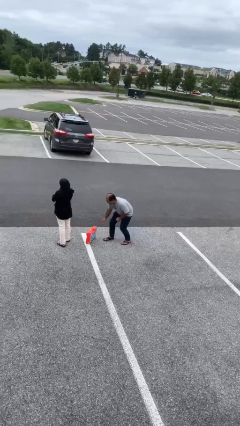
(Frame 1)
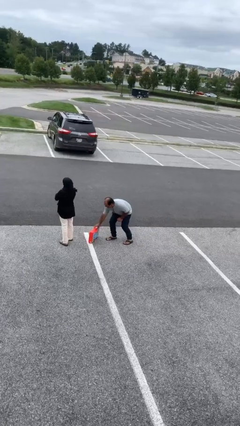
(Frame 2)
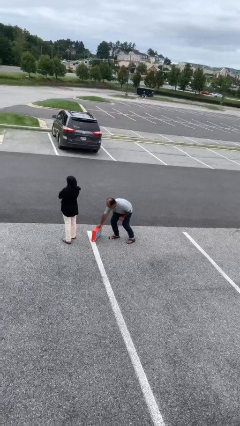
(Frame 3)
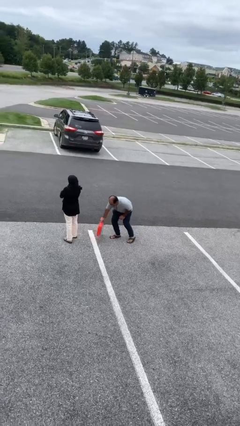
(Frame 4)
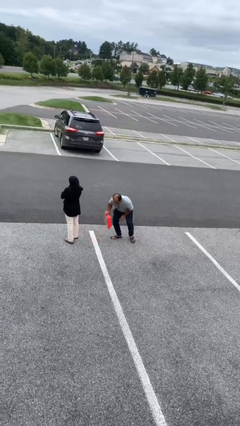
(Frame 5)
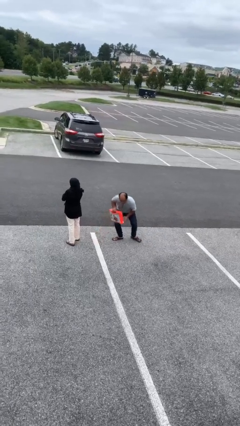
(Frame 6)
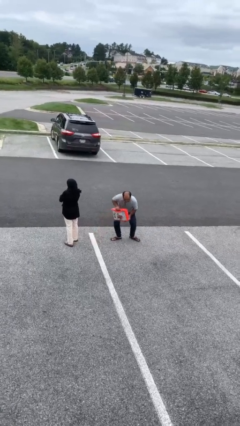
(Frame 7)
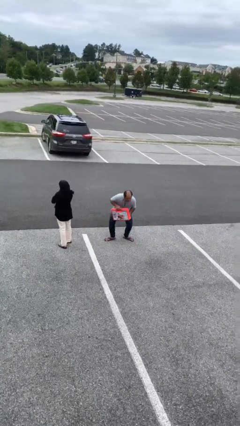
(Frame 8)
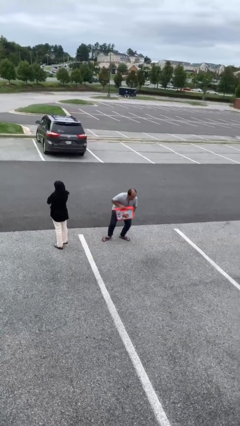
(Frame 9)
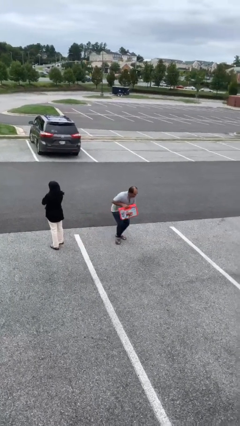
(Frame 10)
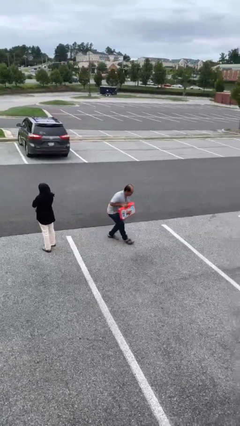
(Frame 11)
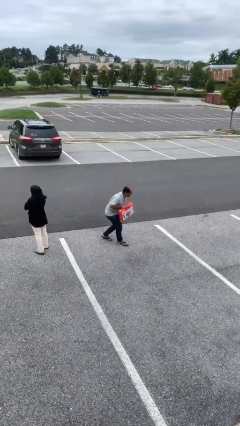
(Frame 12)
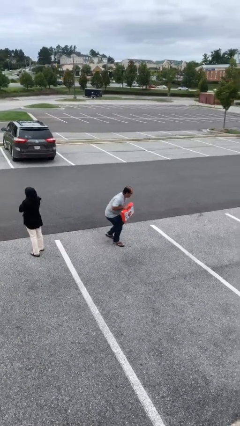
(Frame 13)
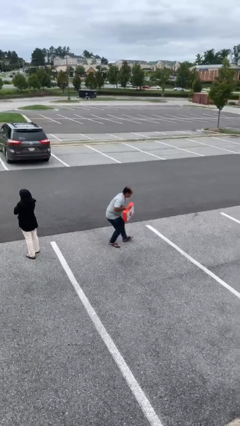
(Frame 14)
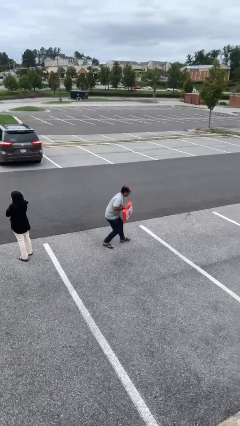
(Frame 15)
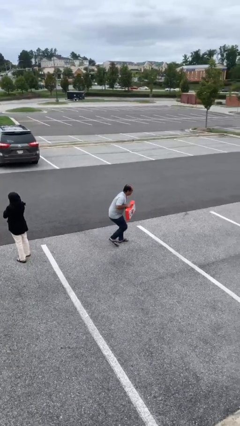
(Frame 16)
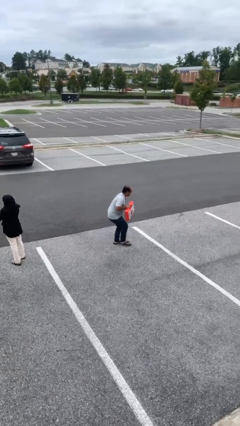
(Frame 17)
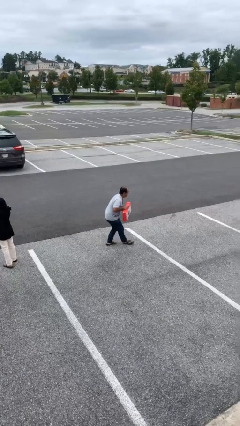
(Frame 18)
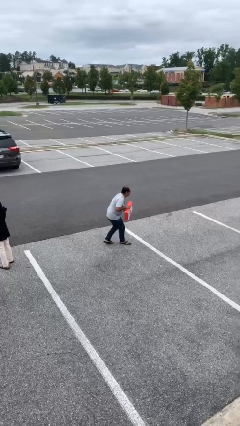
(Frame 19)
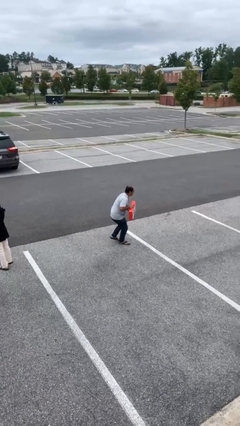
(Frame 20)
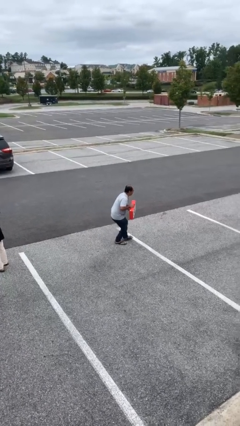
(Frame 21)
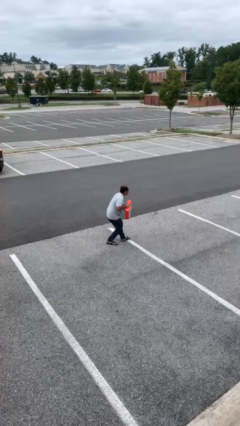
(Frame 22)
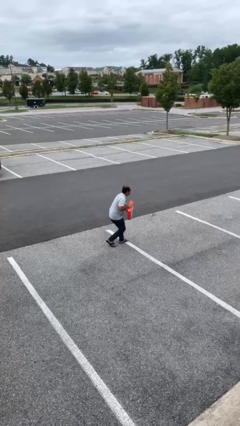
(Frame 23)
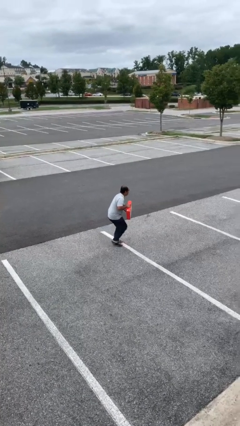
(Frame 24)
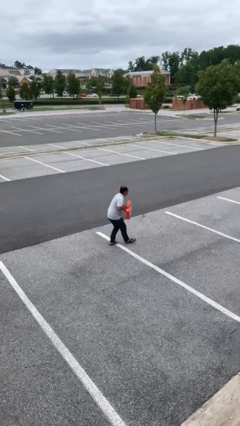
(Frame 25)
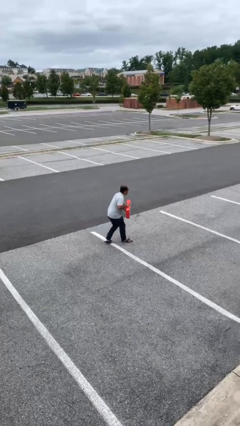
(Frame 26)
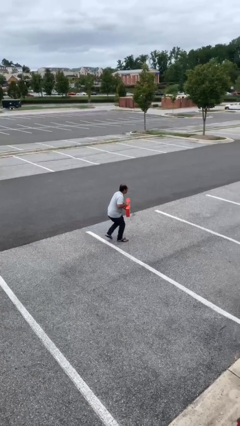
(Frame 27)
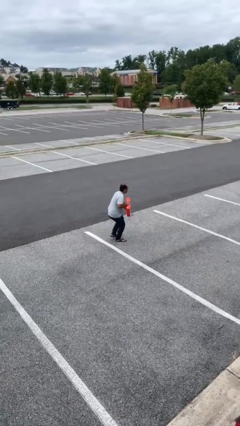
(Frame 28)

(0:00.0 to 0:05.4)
person steals object from person

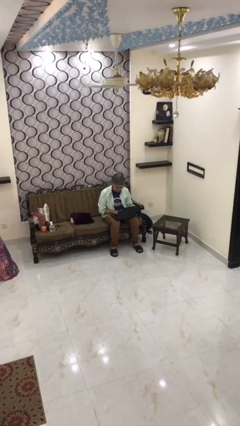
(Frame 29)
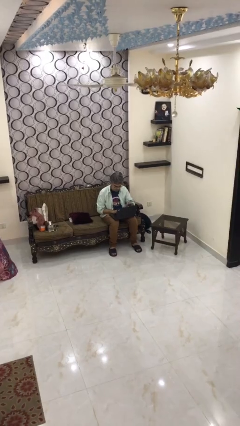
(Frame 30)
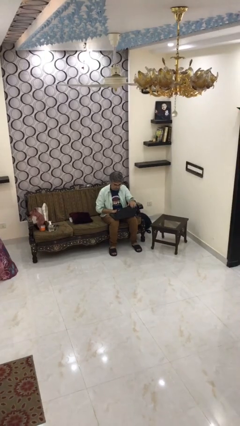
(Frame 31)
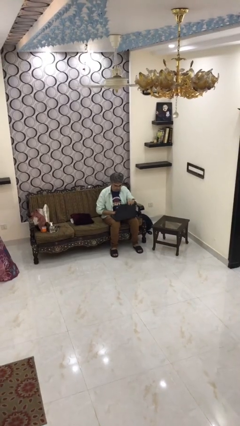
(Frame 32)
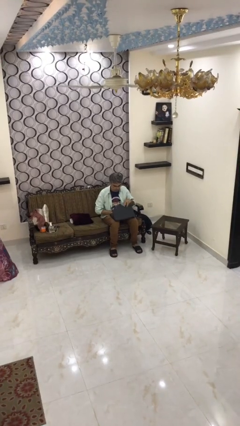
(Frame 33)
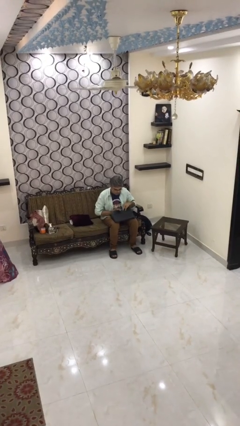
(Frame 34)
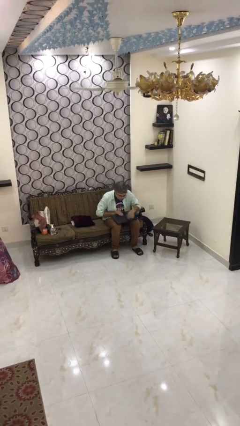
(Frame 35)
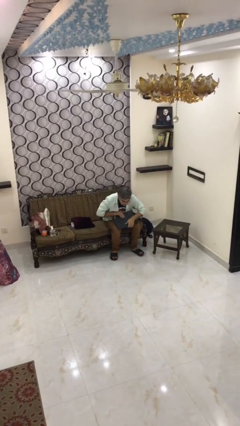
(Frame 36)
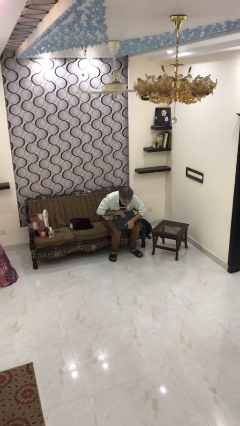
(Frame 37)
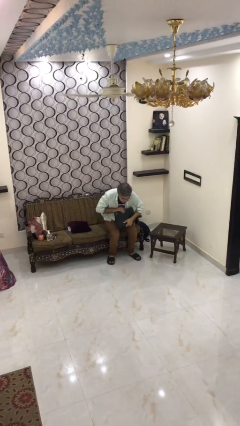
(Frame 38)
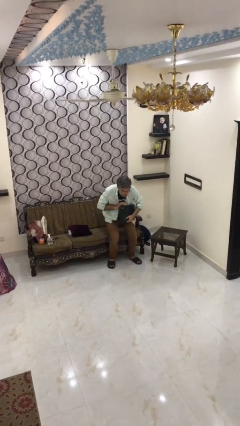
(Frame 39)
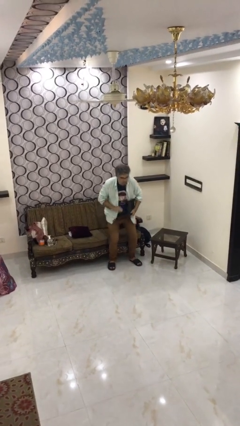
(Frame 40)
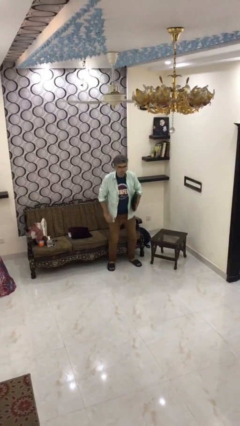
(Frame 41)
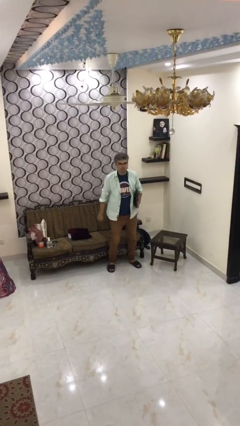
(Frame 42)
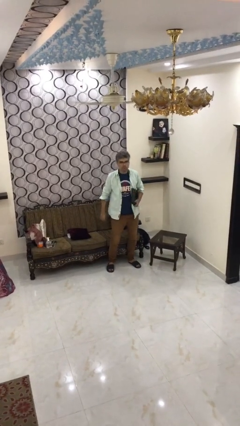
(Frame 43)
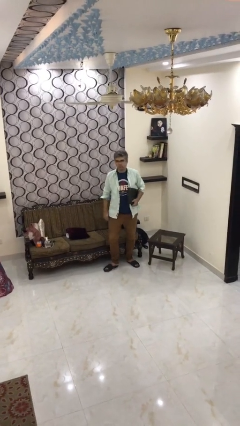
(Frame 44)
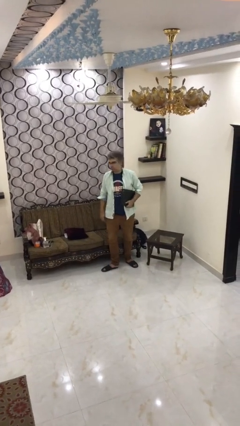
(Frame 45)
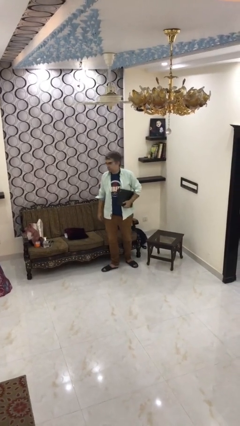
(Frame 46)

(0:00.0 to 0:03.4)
person stands up

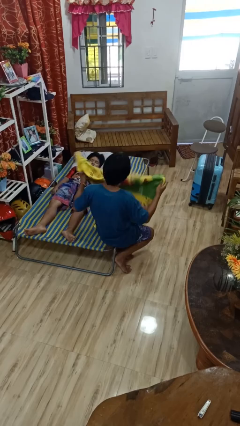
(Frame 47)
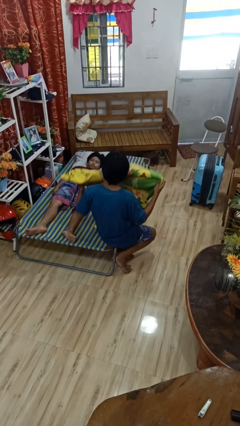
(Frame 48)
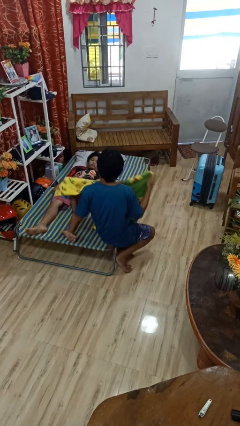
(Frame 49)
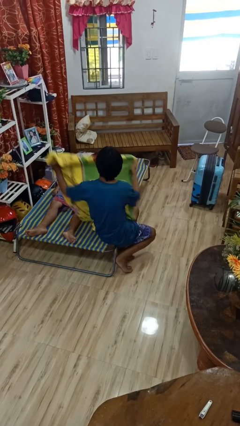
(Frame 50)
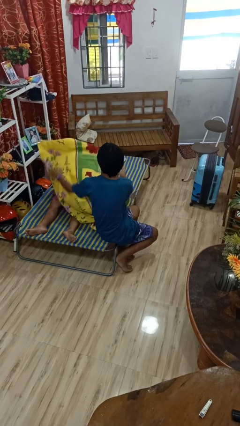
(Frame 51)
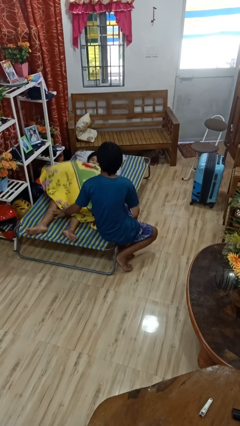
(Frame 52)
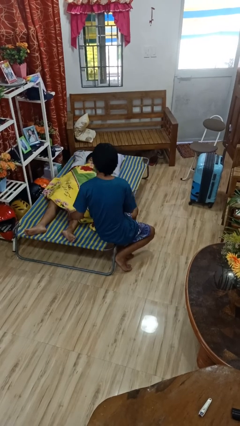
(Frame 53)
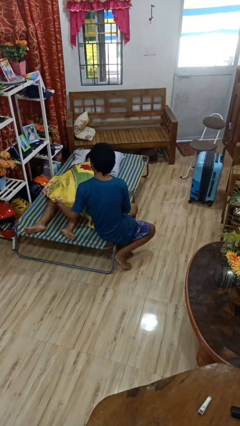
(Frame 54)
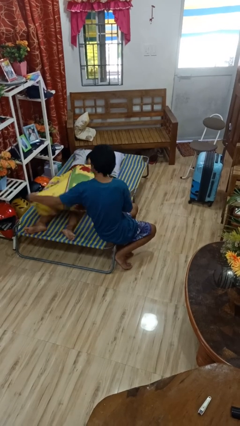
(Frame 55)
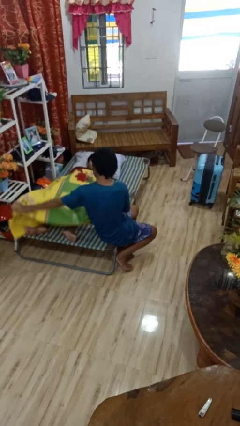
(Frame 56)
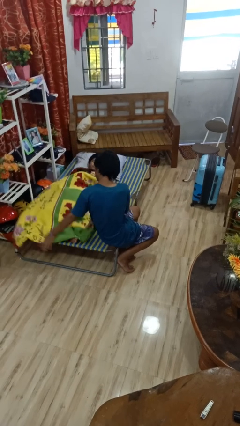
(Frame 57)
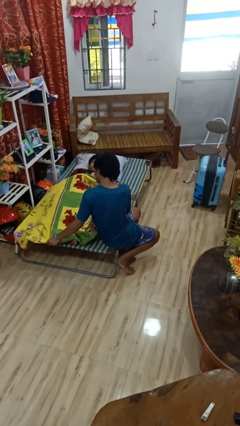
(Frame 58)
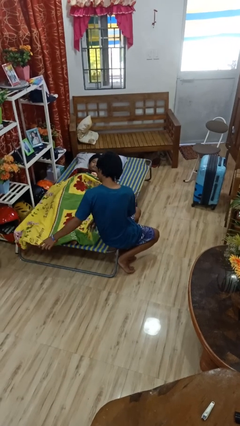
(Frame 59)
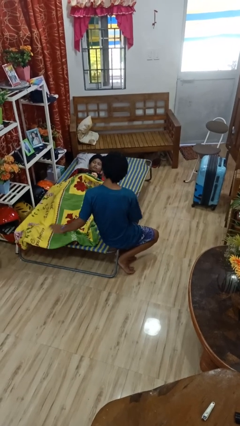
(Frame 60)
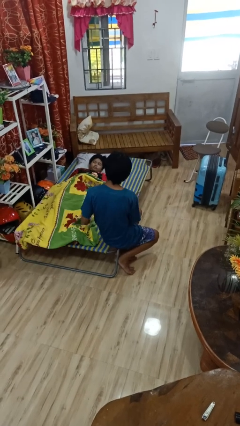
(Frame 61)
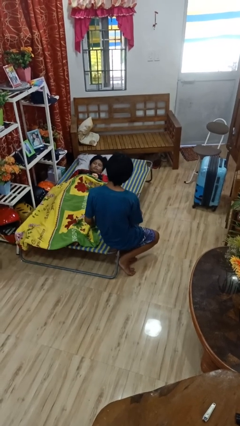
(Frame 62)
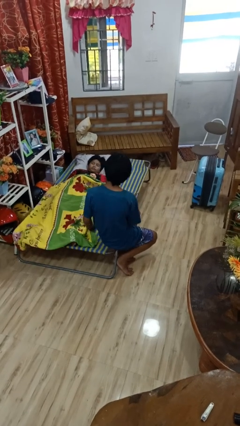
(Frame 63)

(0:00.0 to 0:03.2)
person covers friend with blanket

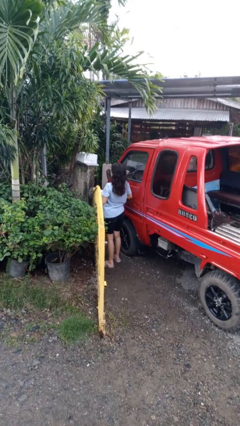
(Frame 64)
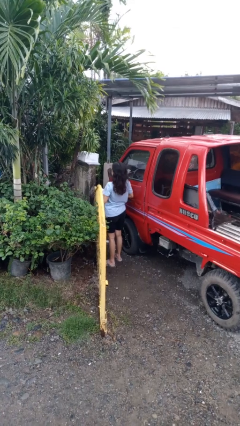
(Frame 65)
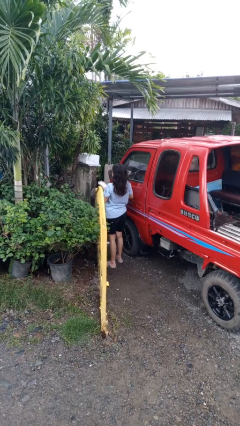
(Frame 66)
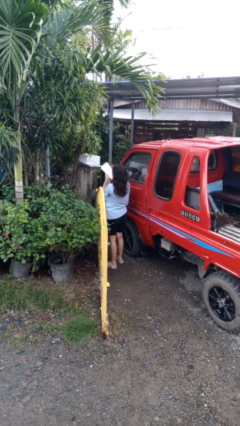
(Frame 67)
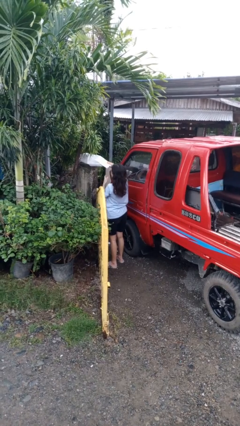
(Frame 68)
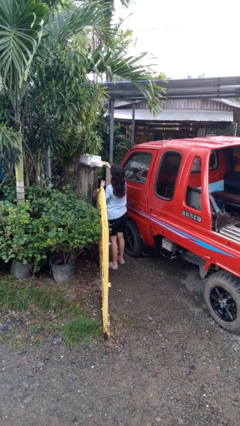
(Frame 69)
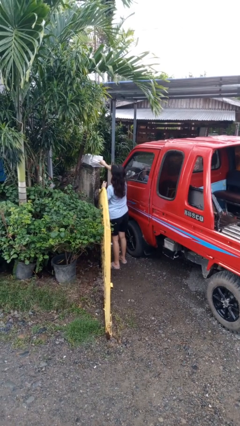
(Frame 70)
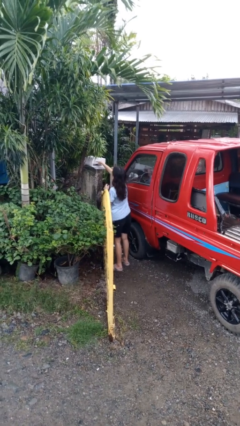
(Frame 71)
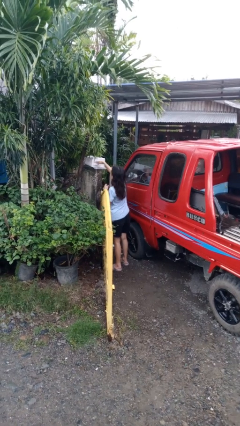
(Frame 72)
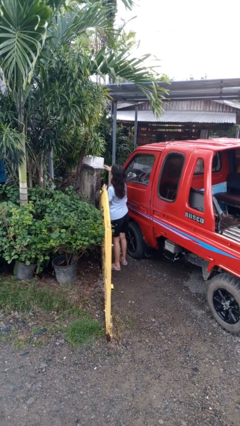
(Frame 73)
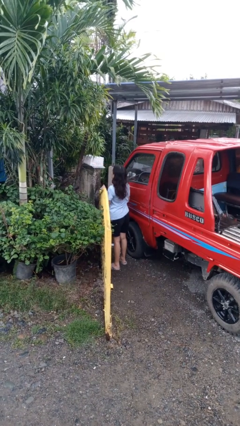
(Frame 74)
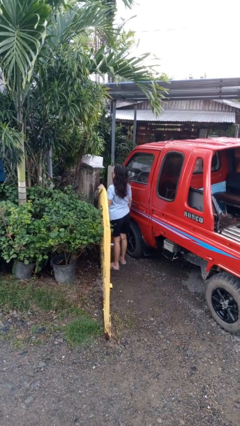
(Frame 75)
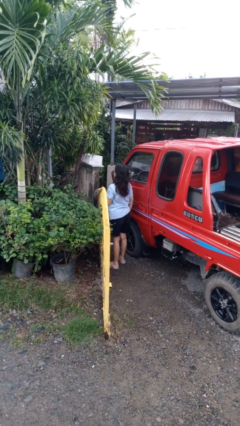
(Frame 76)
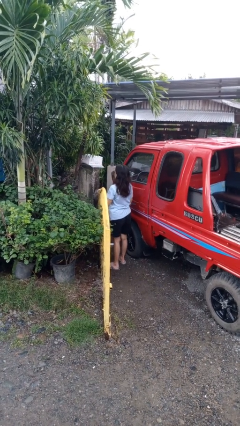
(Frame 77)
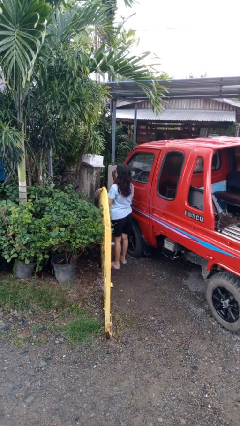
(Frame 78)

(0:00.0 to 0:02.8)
person puts letters in mailbox

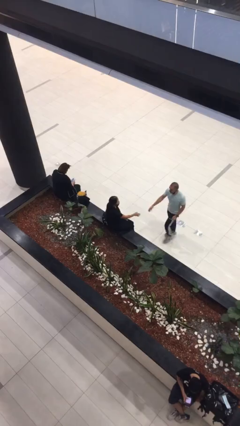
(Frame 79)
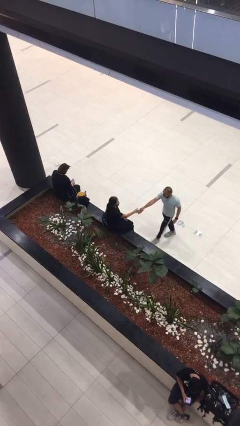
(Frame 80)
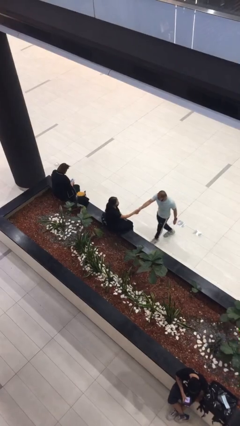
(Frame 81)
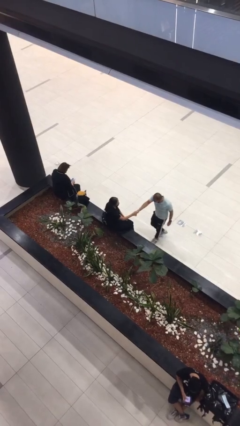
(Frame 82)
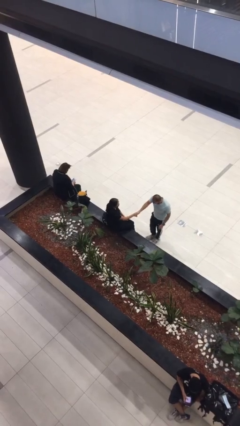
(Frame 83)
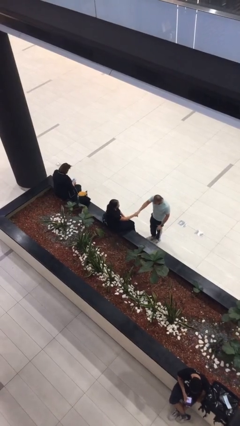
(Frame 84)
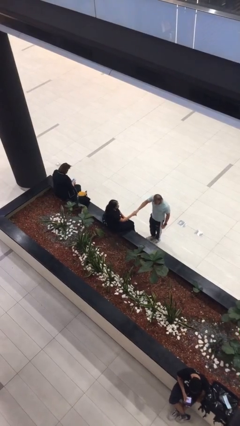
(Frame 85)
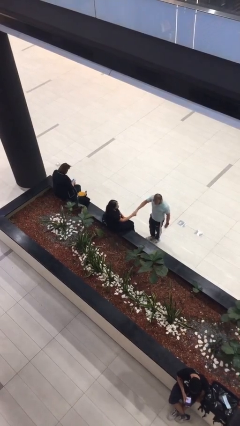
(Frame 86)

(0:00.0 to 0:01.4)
person shakes hand

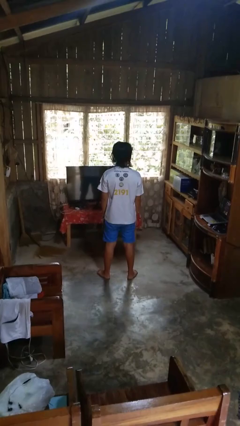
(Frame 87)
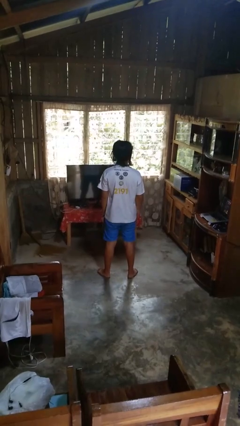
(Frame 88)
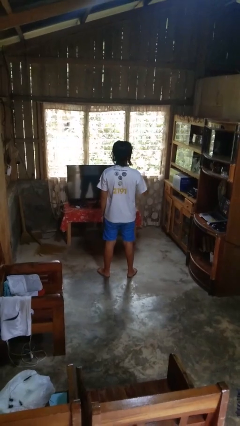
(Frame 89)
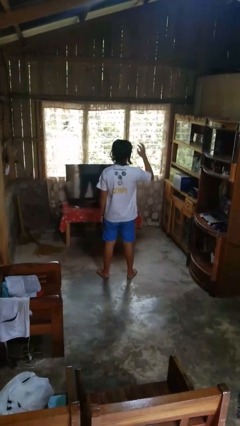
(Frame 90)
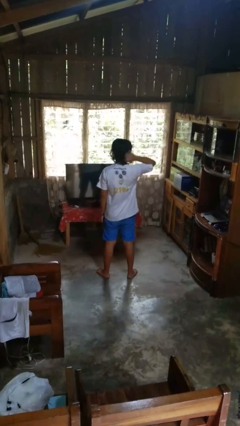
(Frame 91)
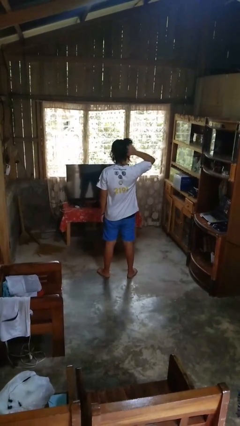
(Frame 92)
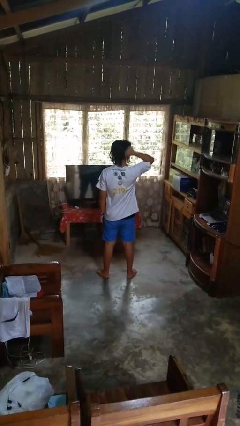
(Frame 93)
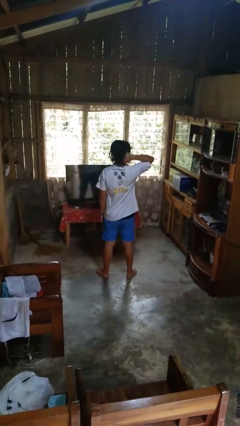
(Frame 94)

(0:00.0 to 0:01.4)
person scratches face
